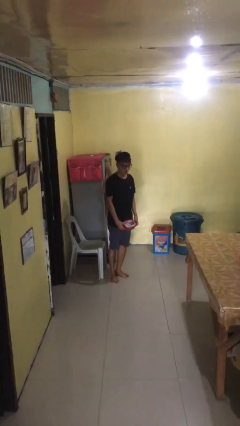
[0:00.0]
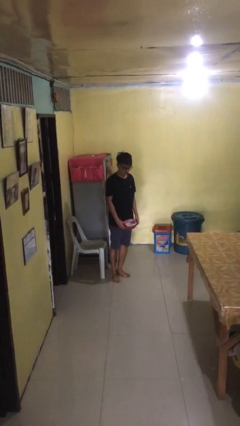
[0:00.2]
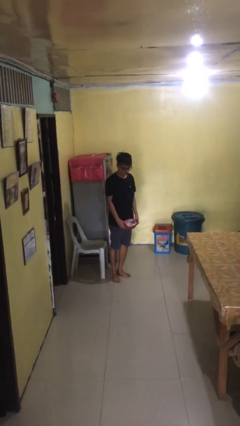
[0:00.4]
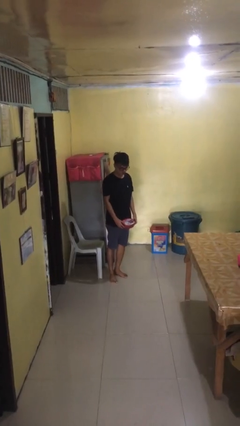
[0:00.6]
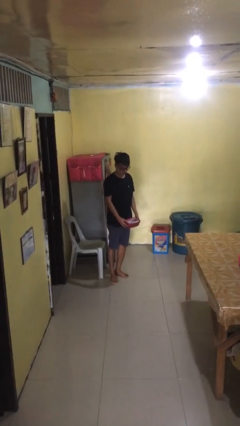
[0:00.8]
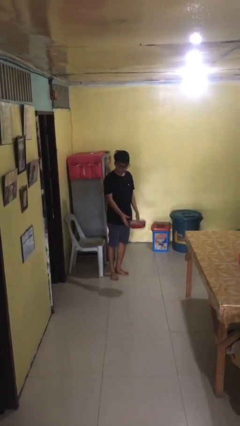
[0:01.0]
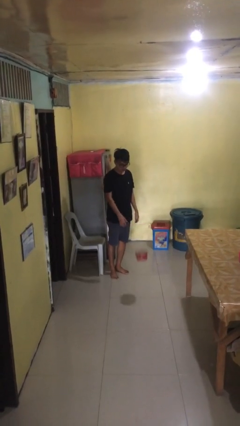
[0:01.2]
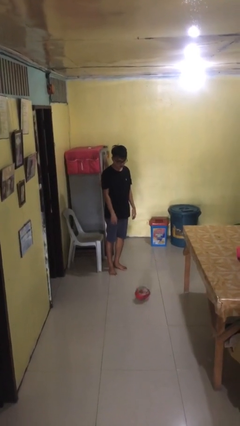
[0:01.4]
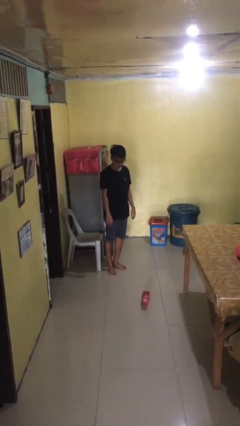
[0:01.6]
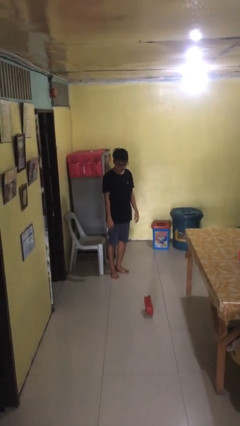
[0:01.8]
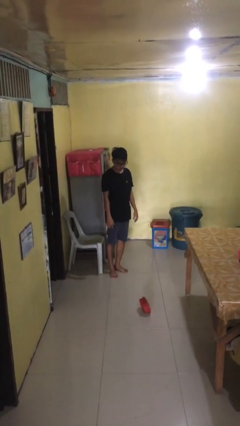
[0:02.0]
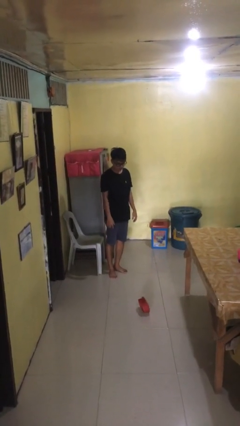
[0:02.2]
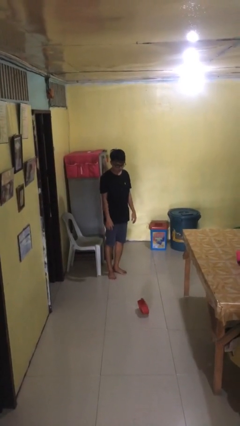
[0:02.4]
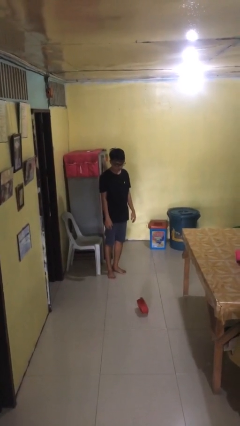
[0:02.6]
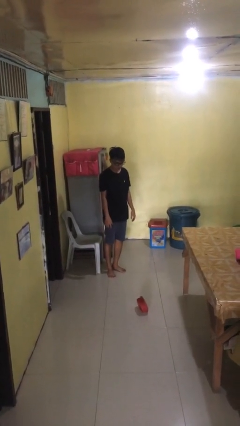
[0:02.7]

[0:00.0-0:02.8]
person throws object to ground

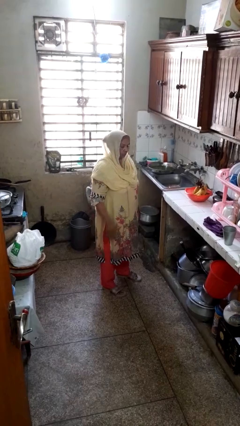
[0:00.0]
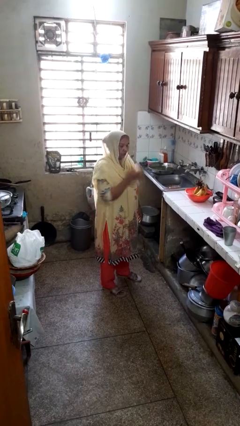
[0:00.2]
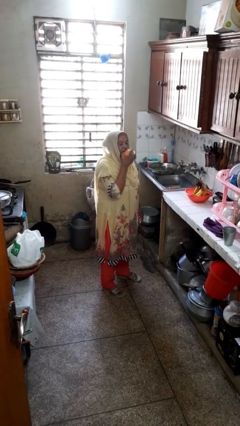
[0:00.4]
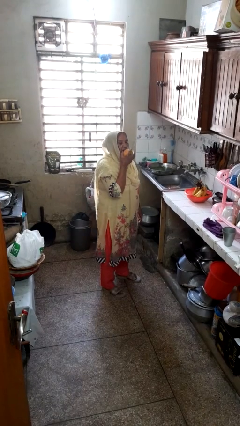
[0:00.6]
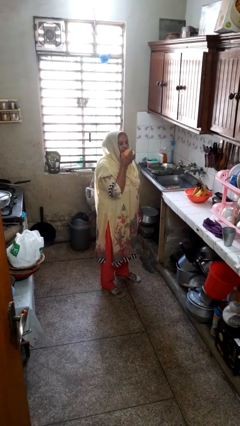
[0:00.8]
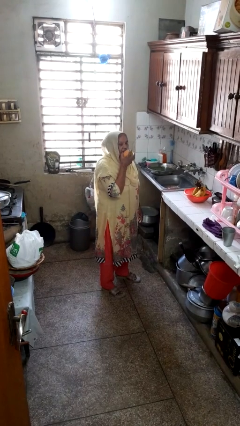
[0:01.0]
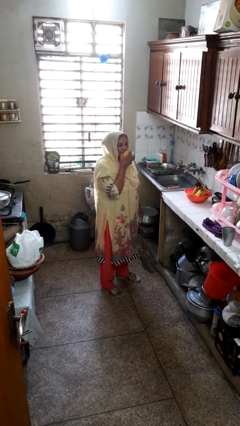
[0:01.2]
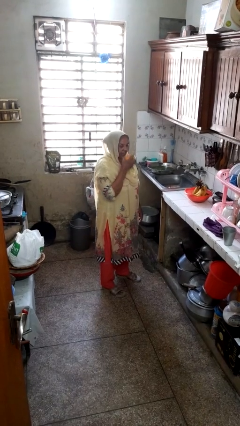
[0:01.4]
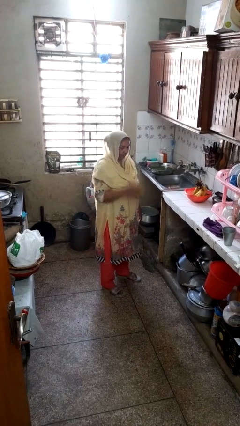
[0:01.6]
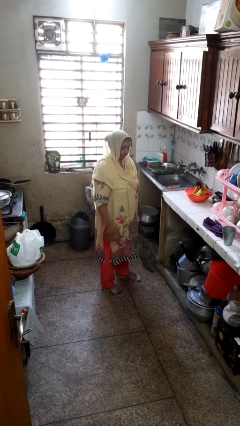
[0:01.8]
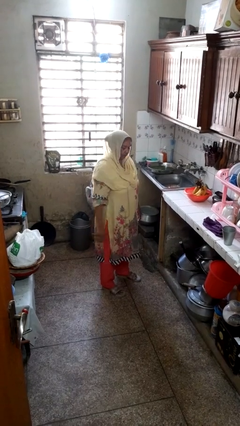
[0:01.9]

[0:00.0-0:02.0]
person eats apple

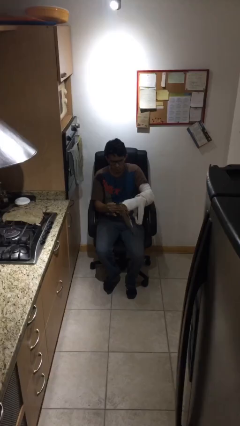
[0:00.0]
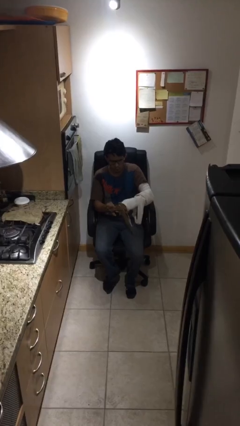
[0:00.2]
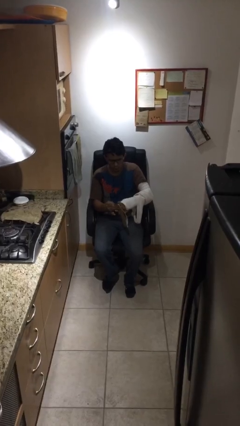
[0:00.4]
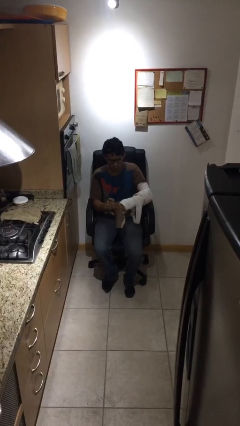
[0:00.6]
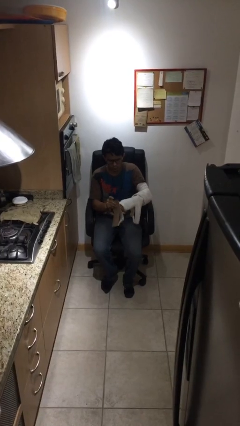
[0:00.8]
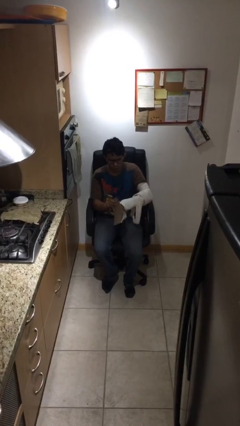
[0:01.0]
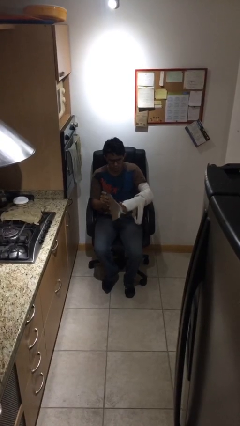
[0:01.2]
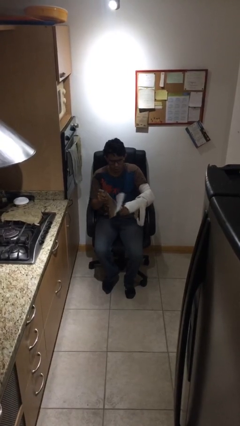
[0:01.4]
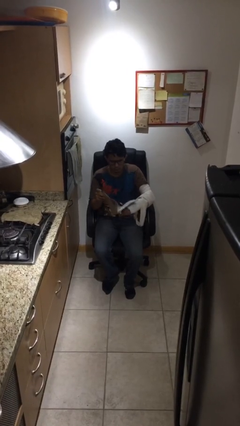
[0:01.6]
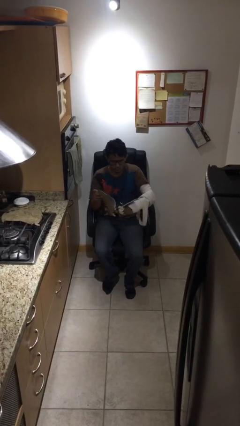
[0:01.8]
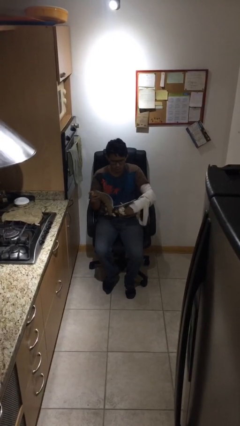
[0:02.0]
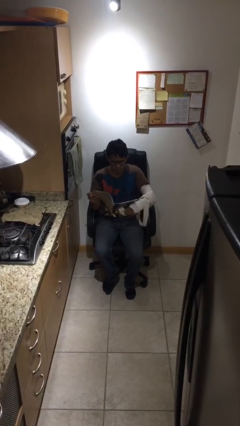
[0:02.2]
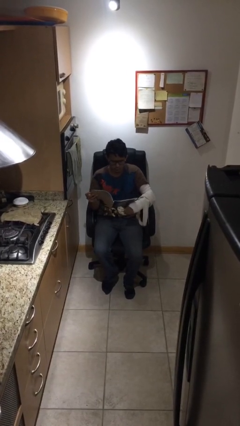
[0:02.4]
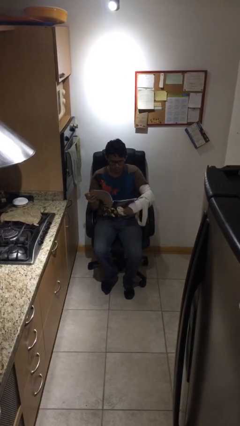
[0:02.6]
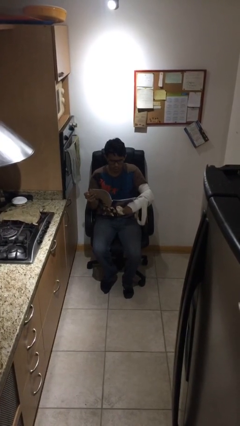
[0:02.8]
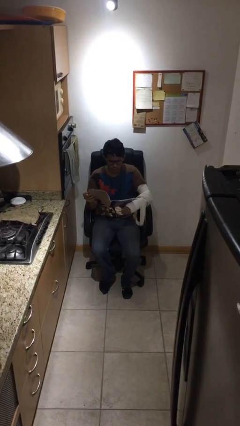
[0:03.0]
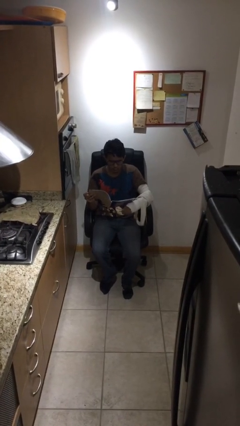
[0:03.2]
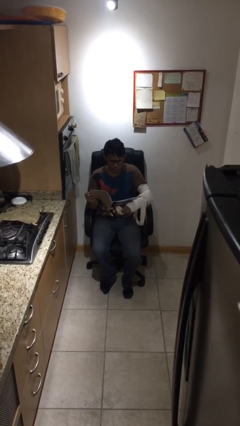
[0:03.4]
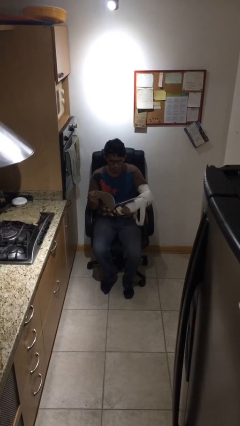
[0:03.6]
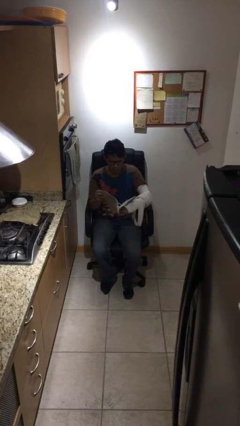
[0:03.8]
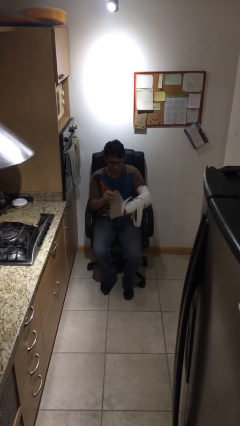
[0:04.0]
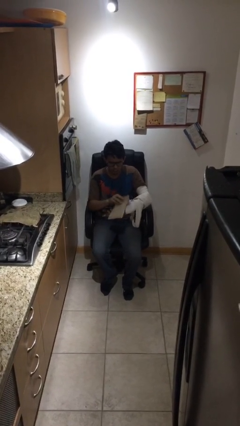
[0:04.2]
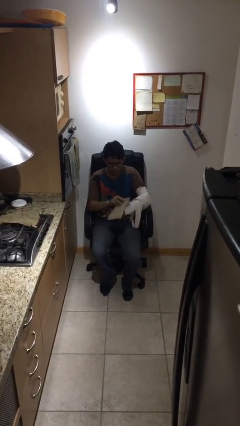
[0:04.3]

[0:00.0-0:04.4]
person reads document

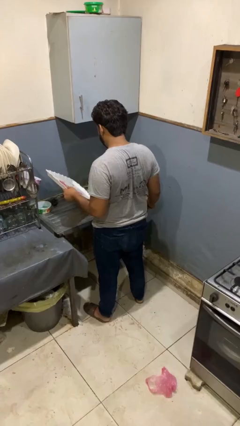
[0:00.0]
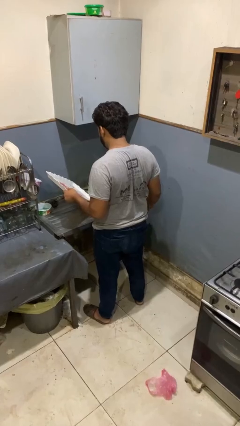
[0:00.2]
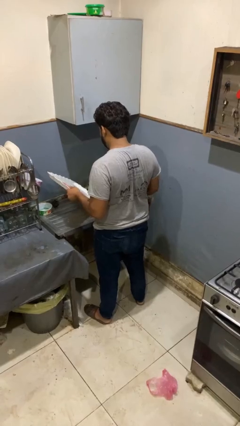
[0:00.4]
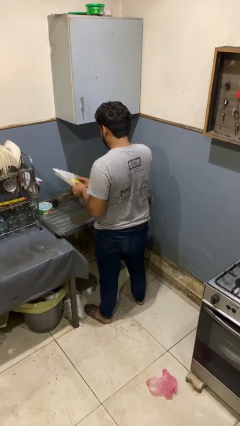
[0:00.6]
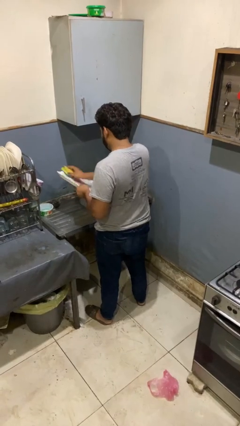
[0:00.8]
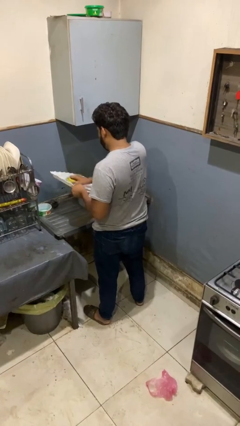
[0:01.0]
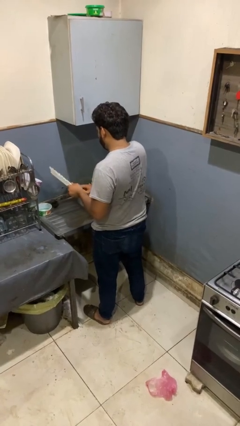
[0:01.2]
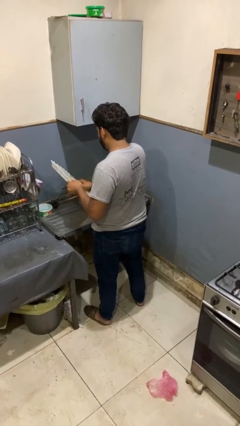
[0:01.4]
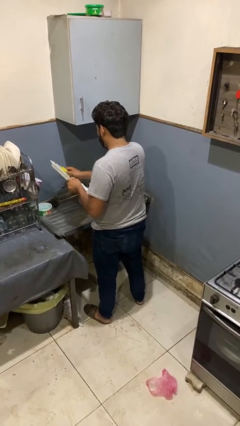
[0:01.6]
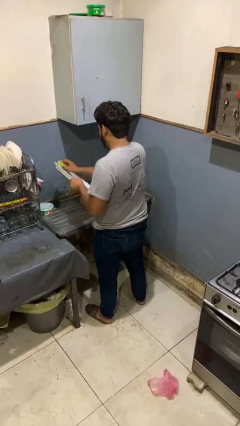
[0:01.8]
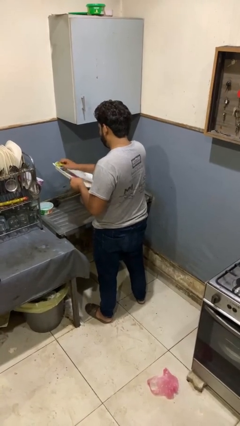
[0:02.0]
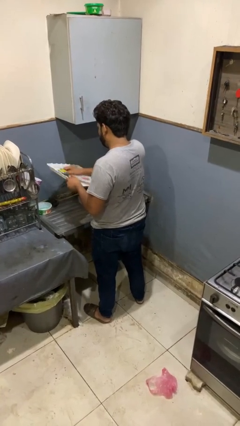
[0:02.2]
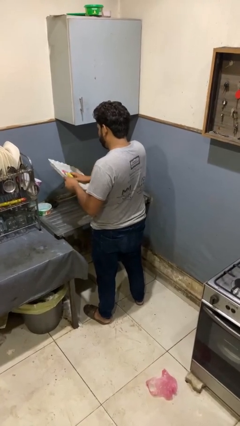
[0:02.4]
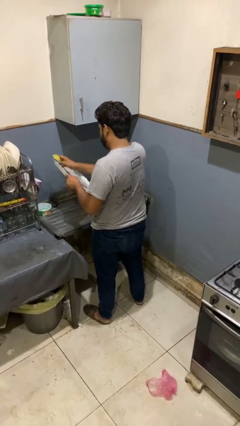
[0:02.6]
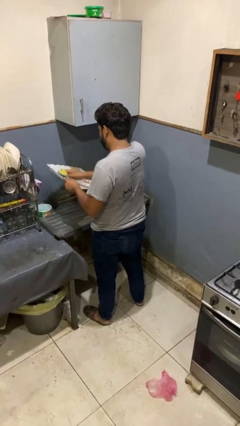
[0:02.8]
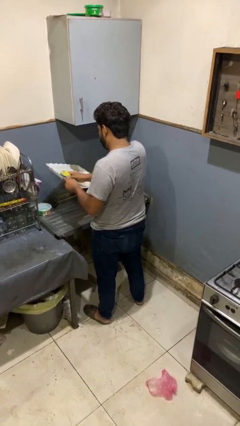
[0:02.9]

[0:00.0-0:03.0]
person washes dish

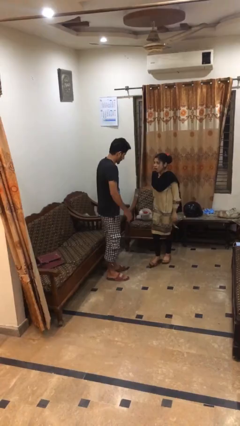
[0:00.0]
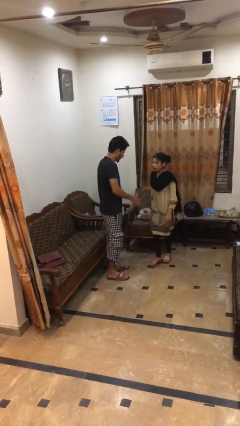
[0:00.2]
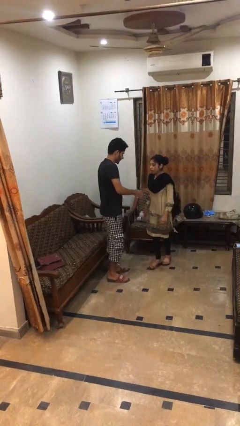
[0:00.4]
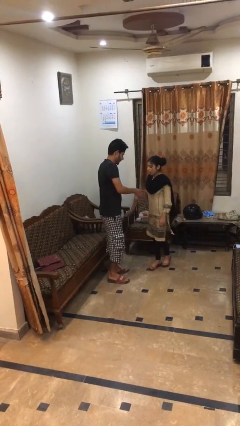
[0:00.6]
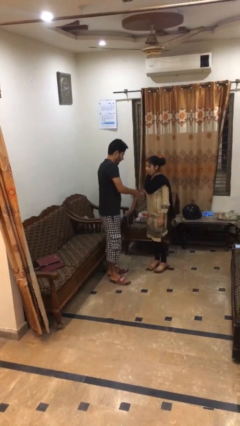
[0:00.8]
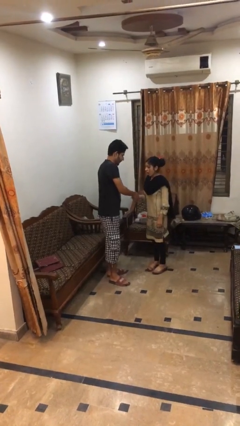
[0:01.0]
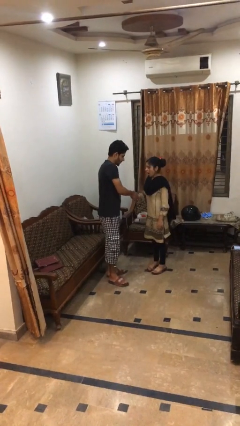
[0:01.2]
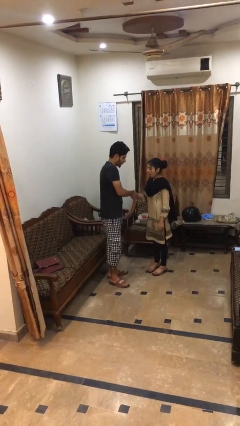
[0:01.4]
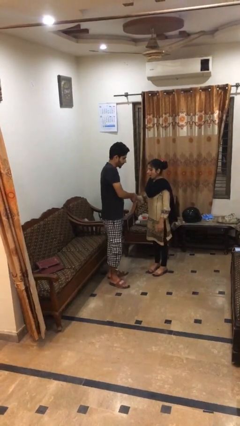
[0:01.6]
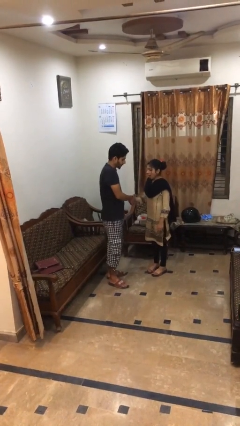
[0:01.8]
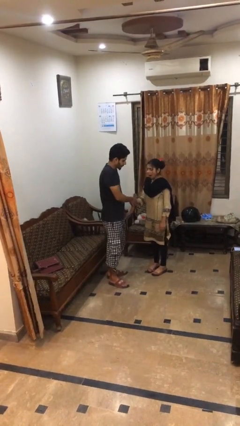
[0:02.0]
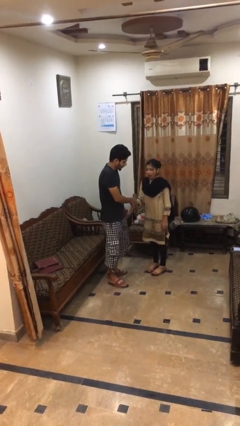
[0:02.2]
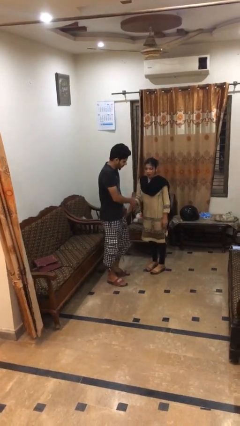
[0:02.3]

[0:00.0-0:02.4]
person shakes hand

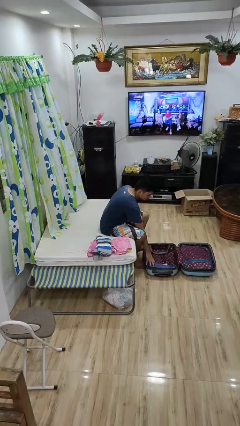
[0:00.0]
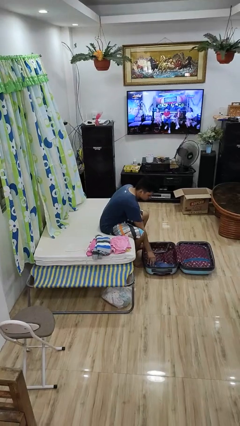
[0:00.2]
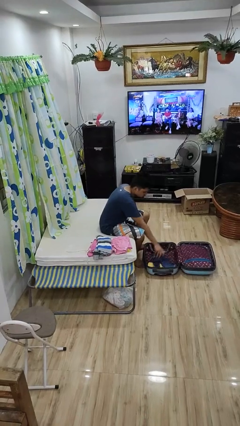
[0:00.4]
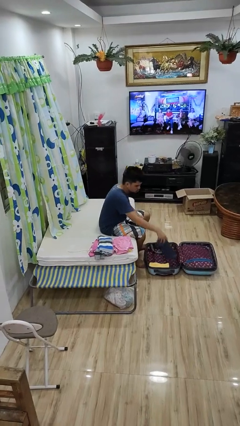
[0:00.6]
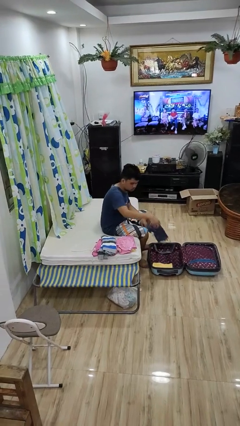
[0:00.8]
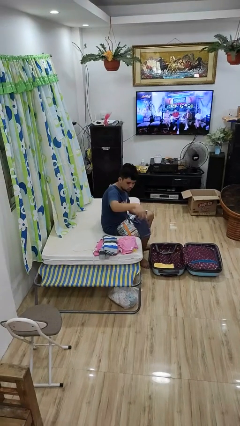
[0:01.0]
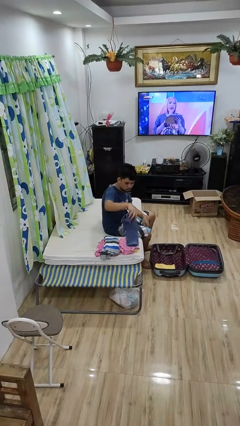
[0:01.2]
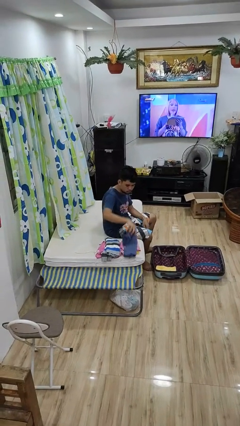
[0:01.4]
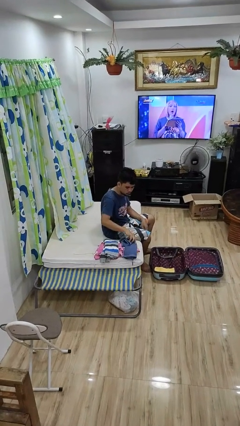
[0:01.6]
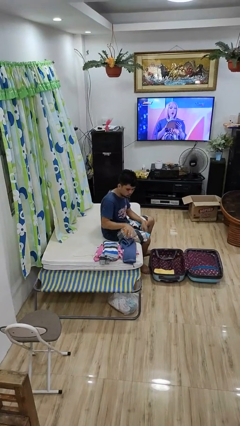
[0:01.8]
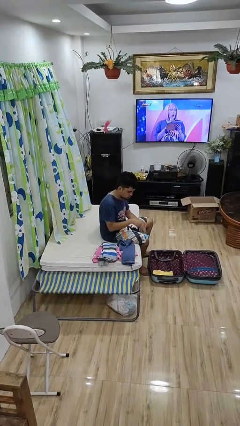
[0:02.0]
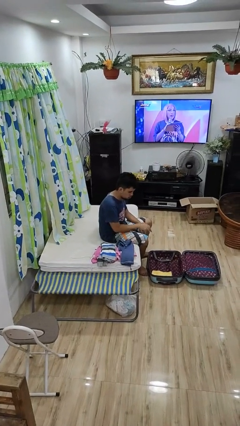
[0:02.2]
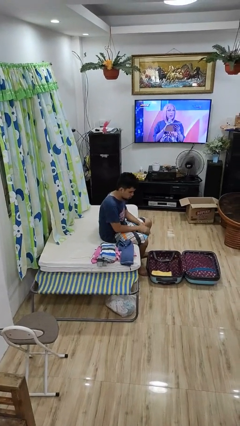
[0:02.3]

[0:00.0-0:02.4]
person unloads clothes from suitcase

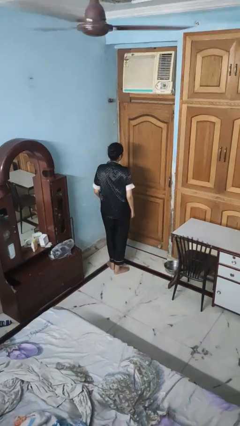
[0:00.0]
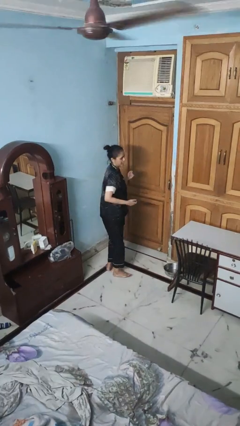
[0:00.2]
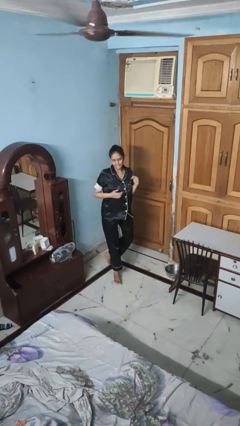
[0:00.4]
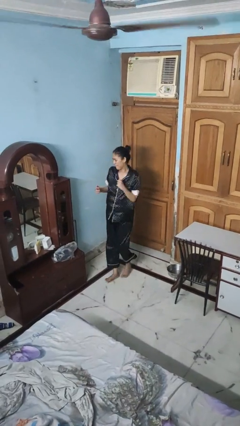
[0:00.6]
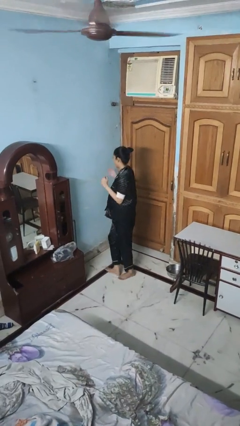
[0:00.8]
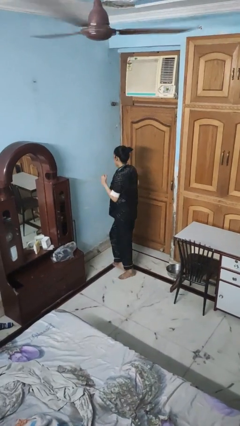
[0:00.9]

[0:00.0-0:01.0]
person twirls
